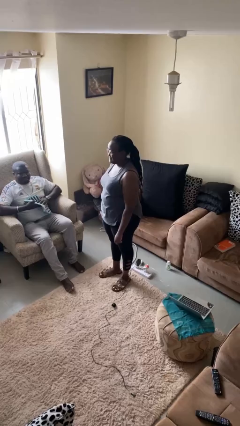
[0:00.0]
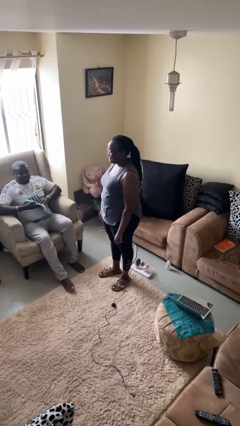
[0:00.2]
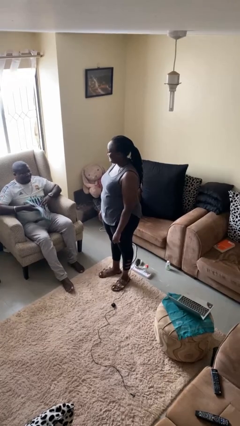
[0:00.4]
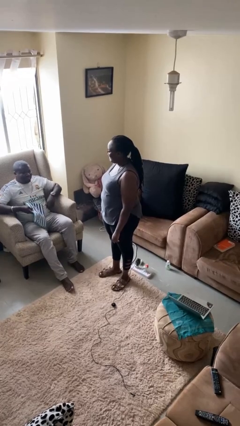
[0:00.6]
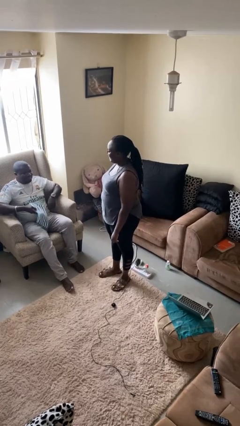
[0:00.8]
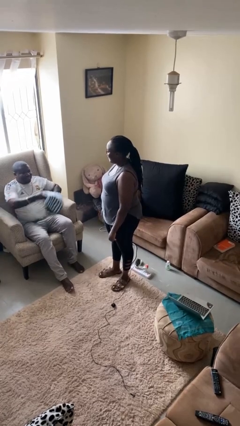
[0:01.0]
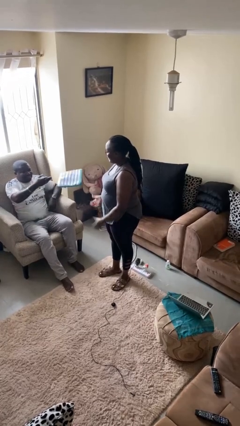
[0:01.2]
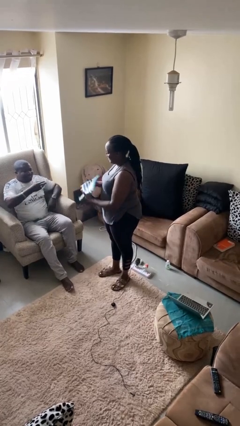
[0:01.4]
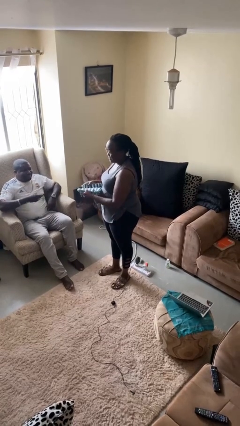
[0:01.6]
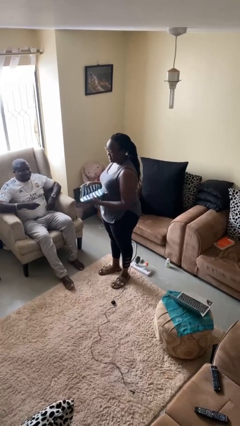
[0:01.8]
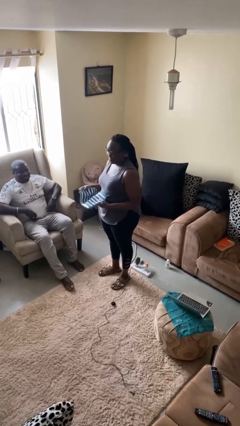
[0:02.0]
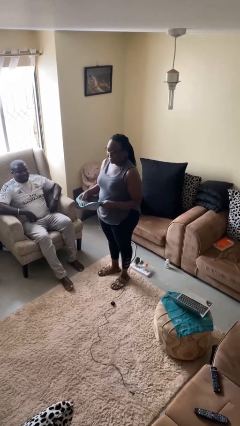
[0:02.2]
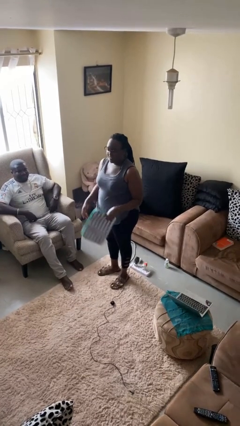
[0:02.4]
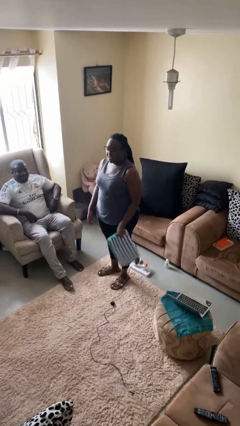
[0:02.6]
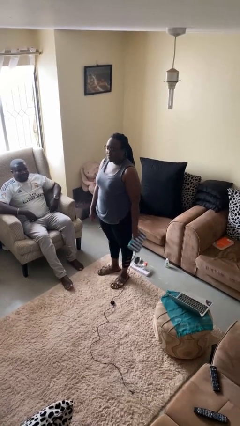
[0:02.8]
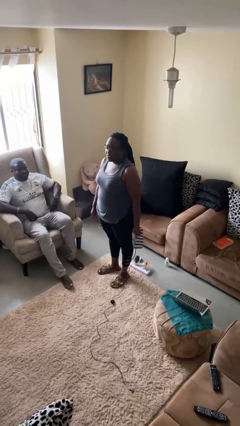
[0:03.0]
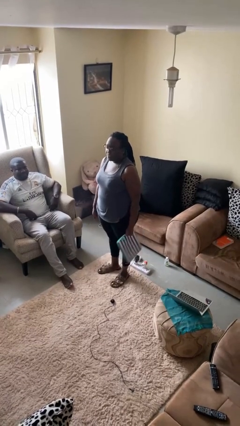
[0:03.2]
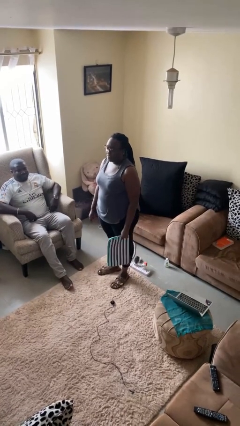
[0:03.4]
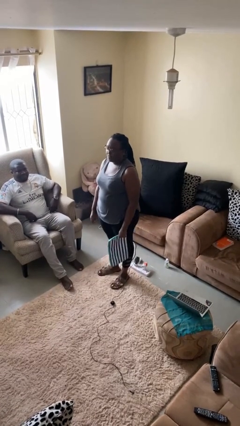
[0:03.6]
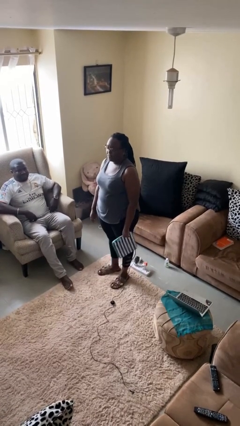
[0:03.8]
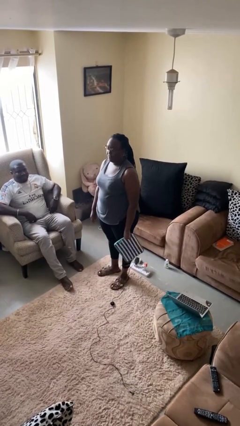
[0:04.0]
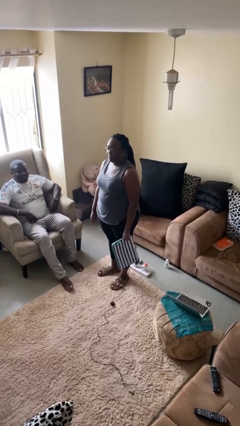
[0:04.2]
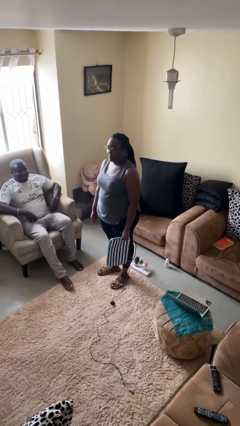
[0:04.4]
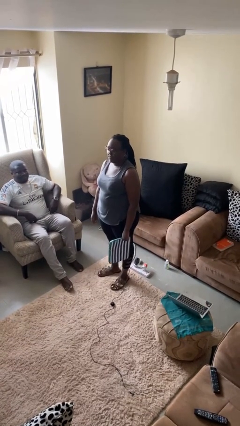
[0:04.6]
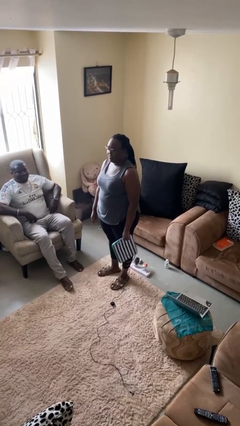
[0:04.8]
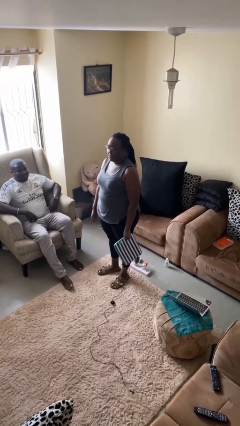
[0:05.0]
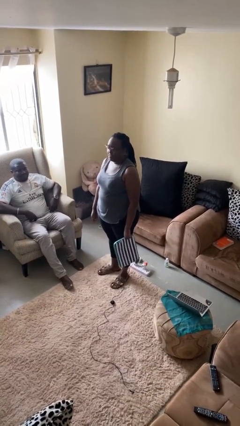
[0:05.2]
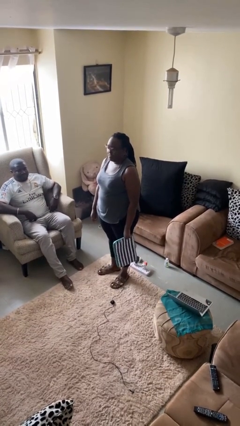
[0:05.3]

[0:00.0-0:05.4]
person catches object from person

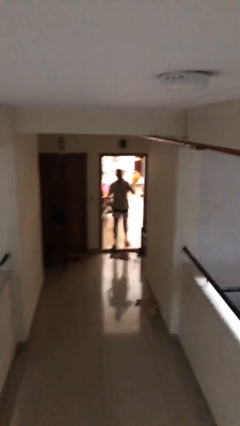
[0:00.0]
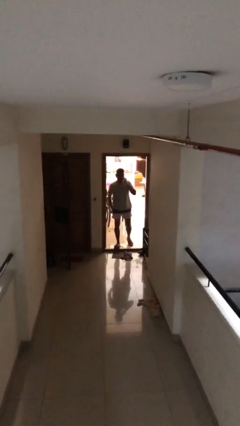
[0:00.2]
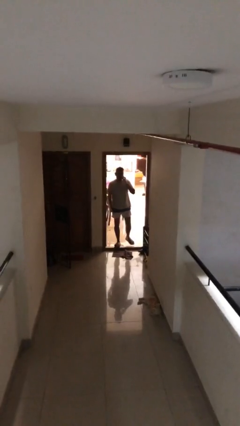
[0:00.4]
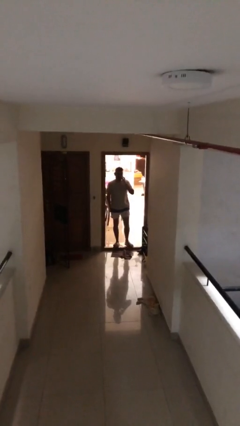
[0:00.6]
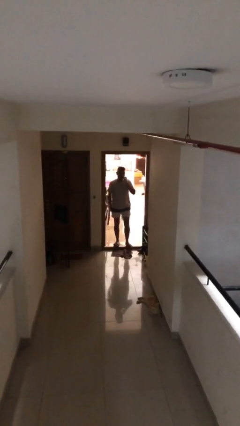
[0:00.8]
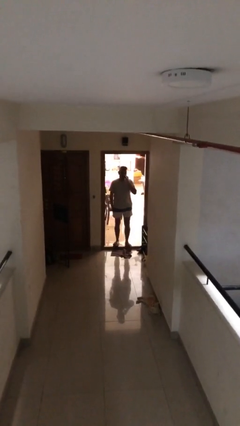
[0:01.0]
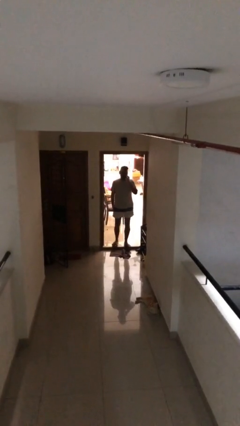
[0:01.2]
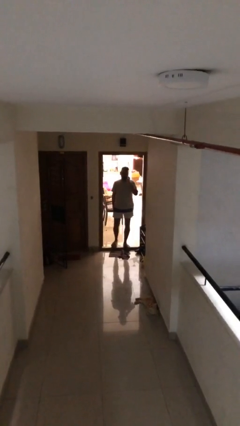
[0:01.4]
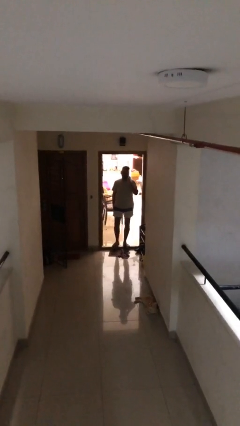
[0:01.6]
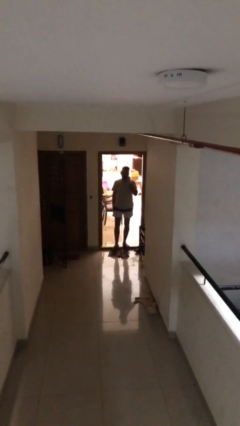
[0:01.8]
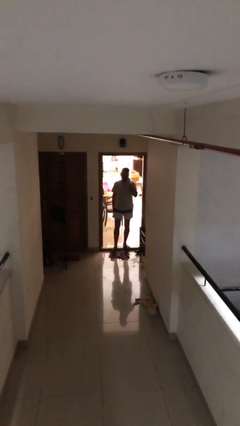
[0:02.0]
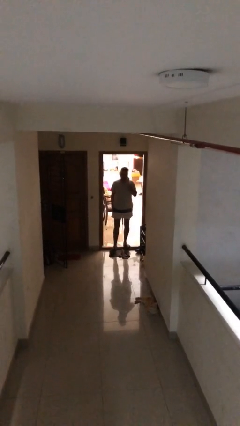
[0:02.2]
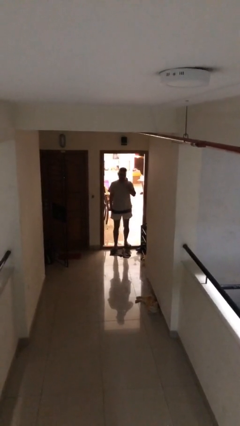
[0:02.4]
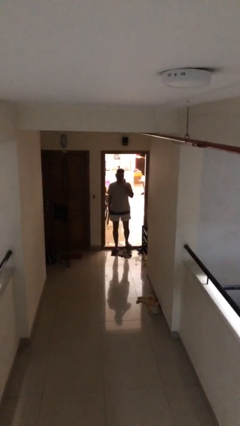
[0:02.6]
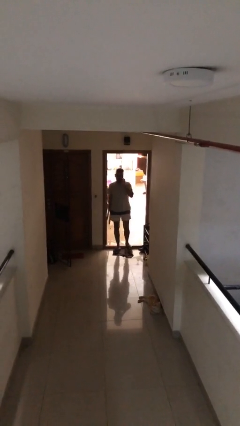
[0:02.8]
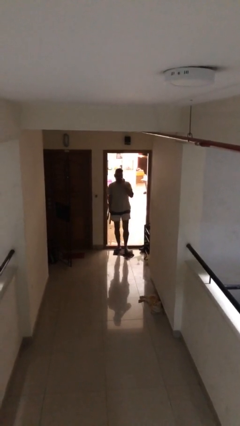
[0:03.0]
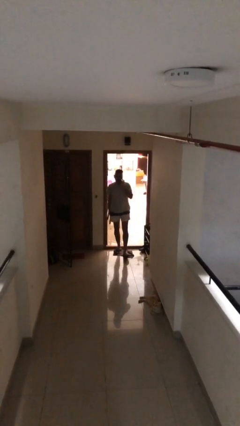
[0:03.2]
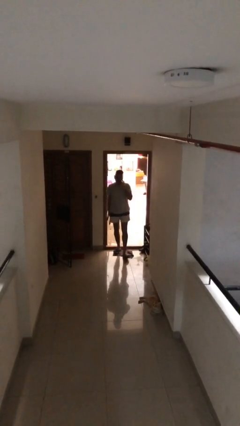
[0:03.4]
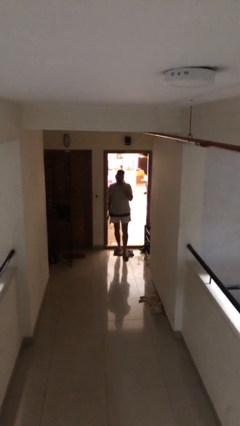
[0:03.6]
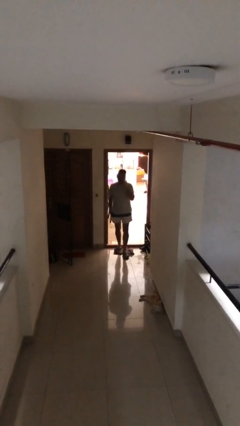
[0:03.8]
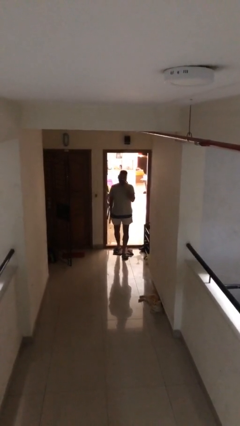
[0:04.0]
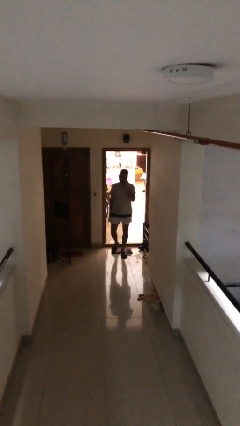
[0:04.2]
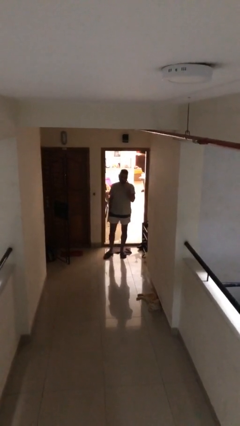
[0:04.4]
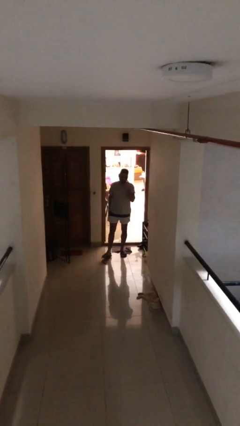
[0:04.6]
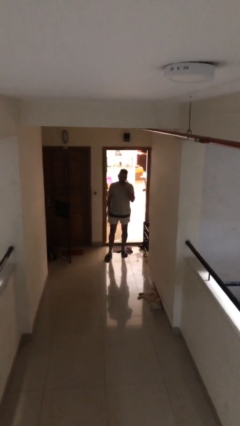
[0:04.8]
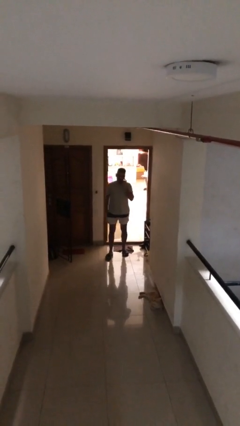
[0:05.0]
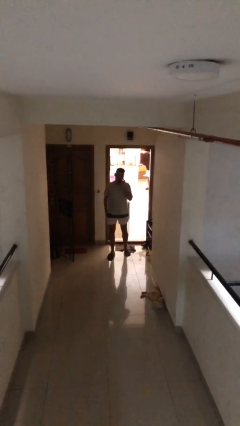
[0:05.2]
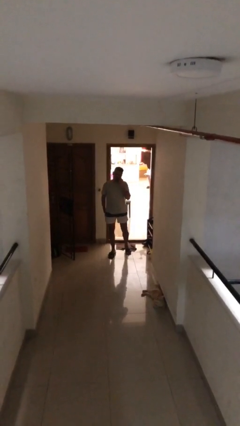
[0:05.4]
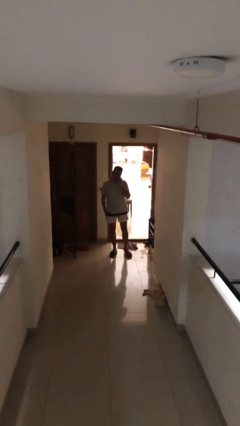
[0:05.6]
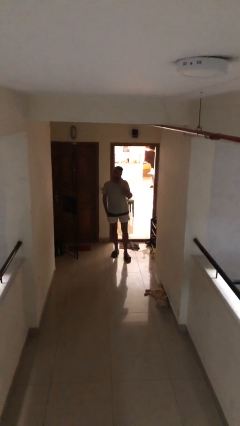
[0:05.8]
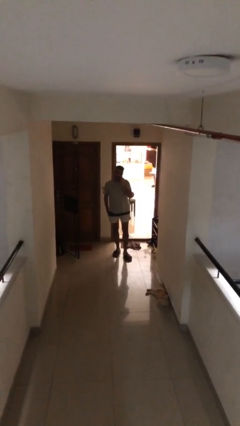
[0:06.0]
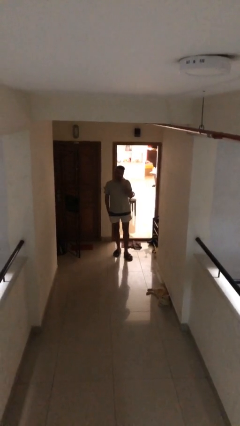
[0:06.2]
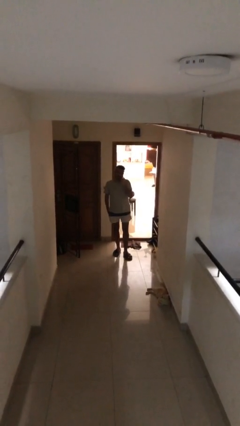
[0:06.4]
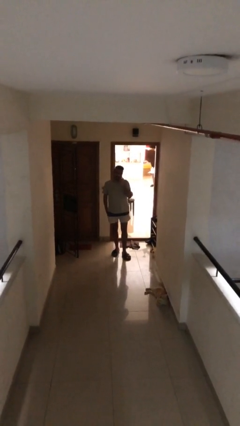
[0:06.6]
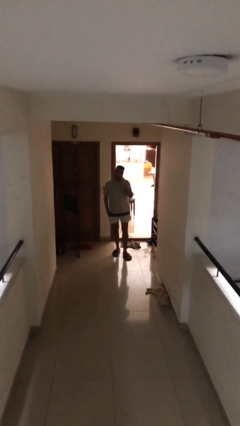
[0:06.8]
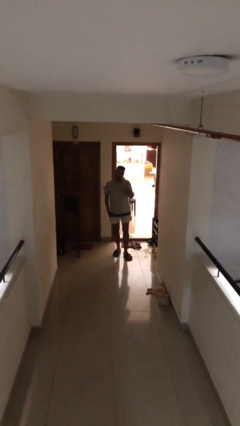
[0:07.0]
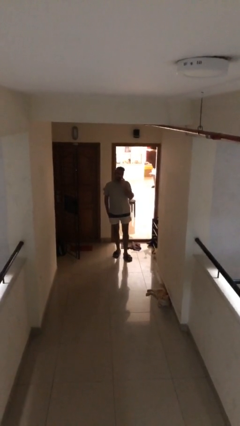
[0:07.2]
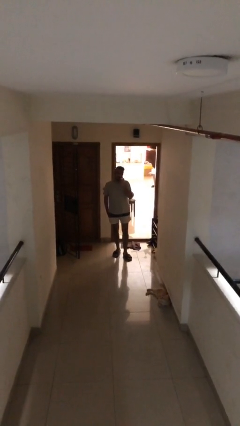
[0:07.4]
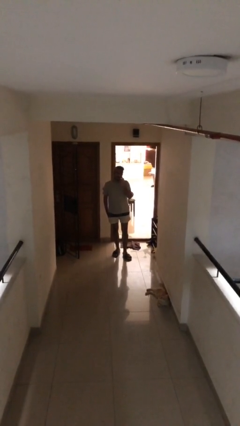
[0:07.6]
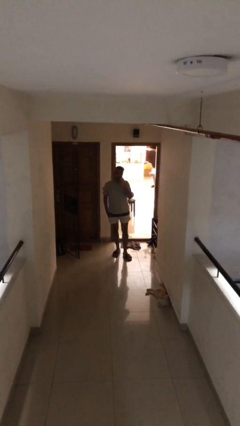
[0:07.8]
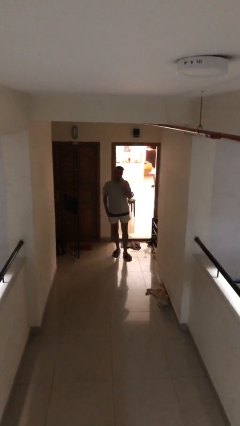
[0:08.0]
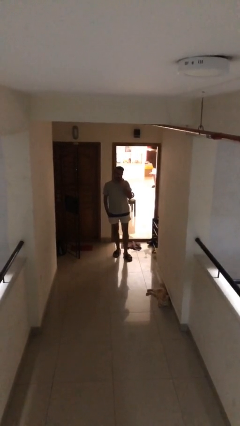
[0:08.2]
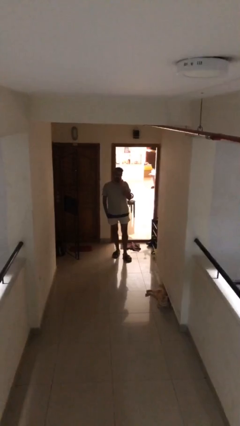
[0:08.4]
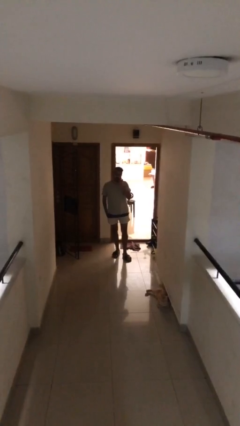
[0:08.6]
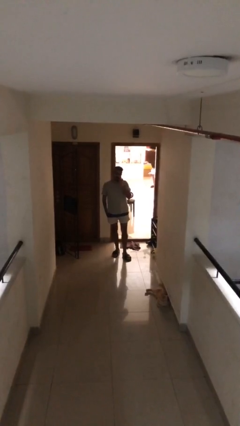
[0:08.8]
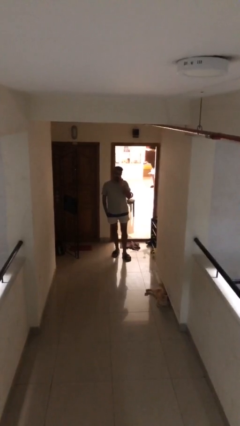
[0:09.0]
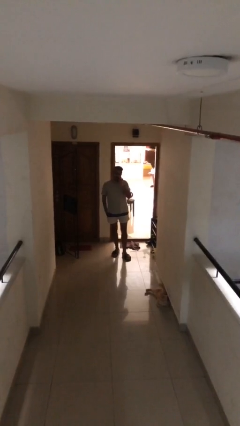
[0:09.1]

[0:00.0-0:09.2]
person enters scene through structure

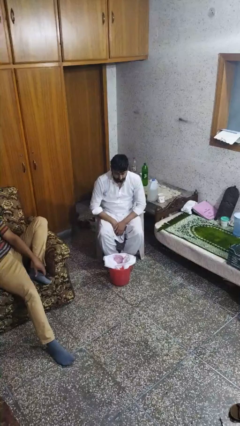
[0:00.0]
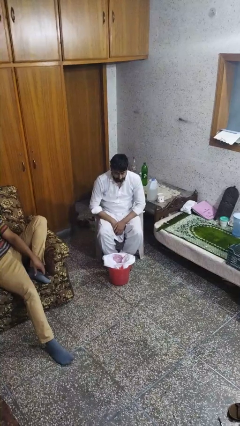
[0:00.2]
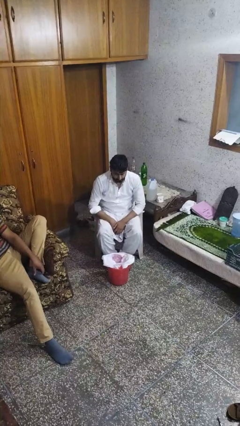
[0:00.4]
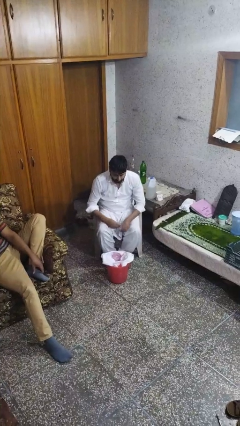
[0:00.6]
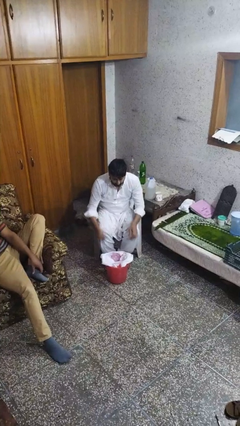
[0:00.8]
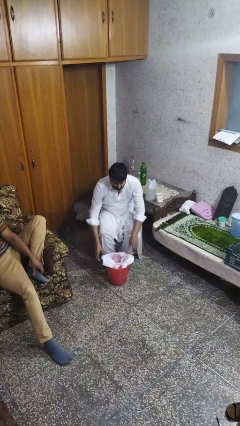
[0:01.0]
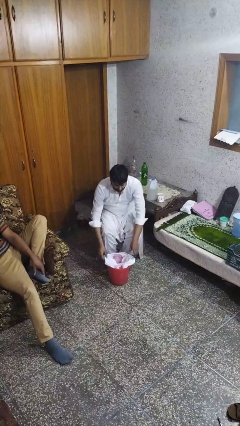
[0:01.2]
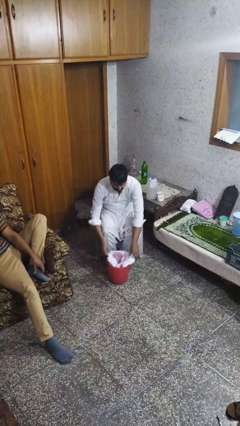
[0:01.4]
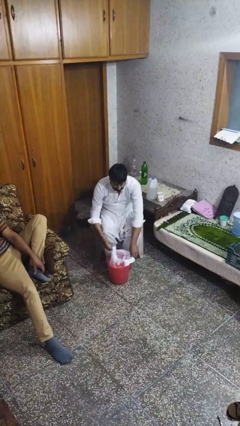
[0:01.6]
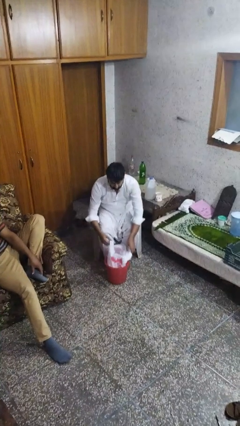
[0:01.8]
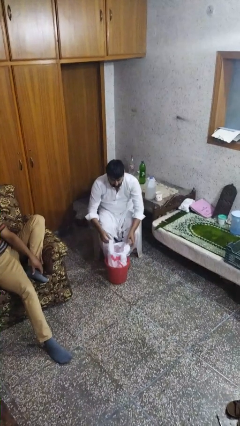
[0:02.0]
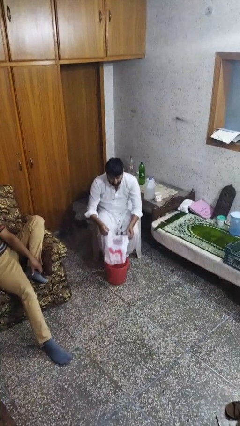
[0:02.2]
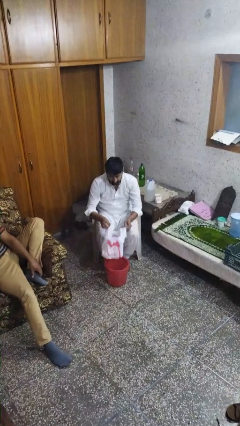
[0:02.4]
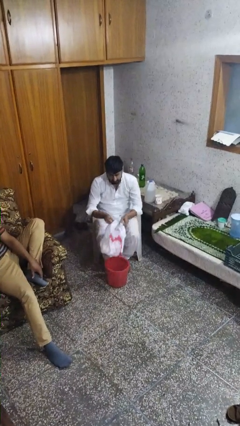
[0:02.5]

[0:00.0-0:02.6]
person removes trashbag from trashcan

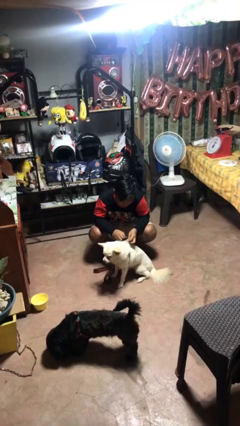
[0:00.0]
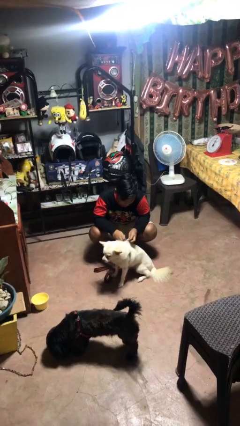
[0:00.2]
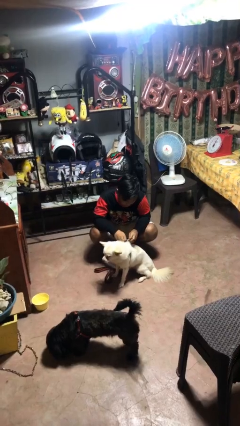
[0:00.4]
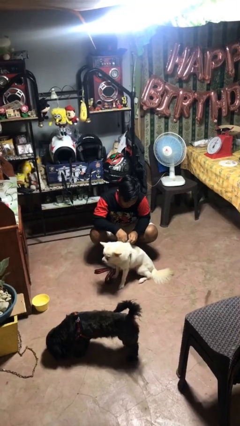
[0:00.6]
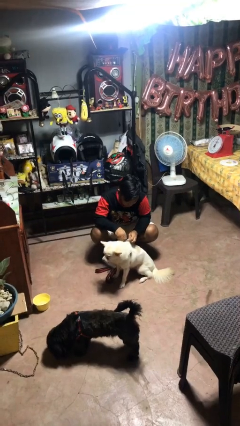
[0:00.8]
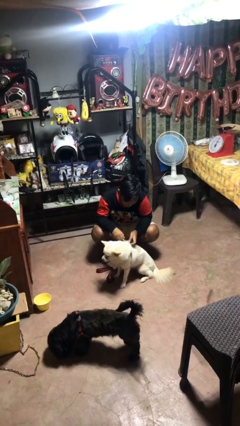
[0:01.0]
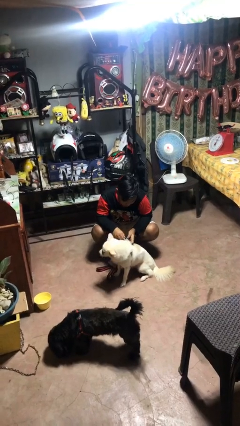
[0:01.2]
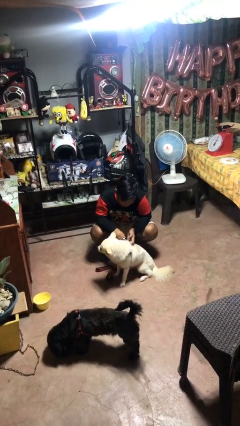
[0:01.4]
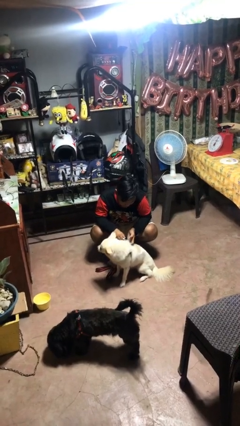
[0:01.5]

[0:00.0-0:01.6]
person attaches leash to dog
